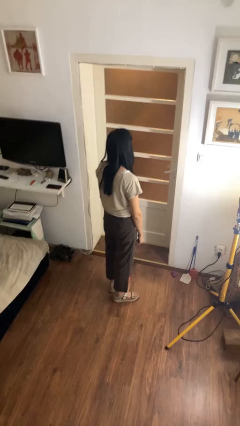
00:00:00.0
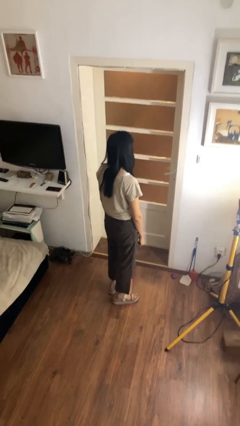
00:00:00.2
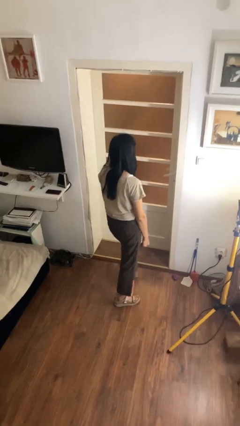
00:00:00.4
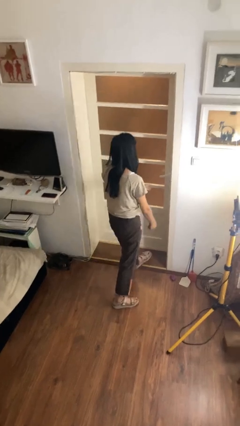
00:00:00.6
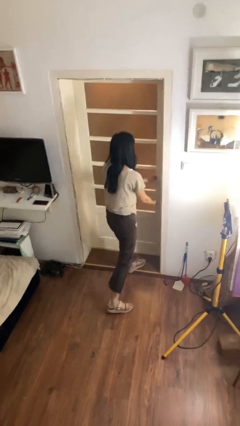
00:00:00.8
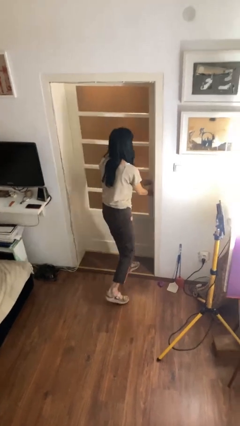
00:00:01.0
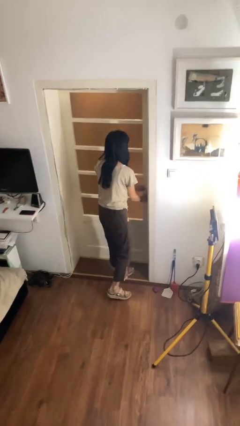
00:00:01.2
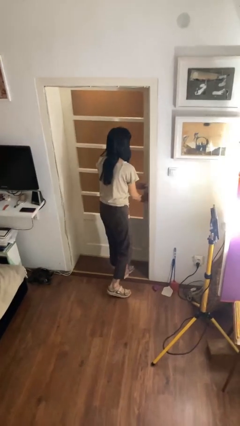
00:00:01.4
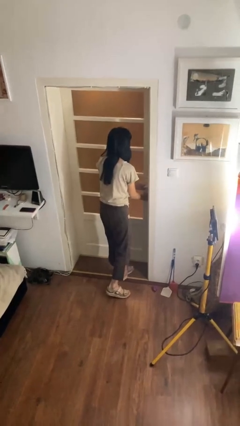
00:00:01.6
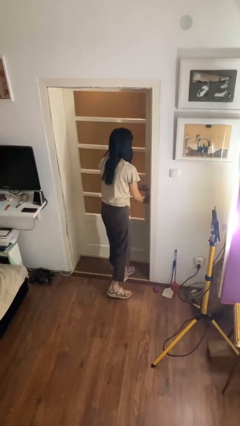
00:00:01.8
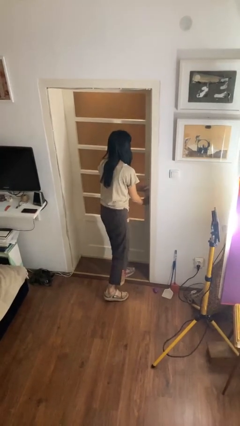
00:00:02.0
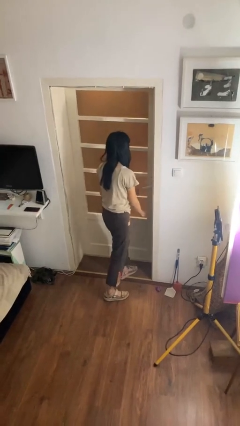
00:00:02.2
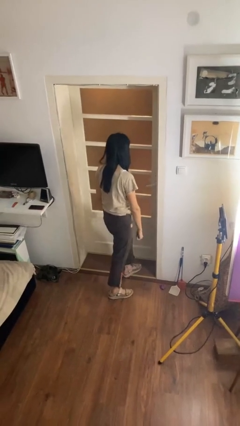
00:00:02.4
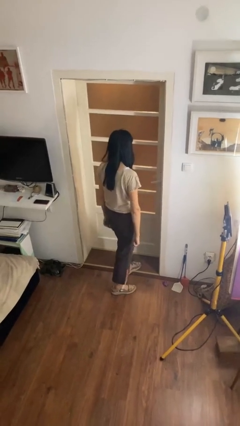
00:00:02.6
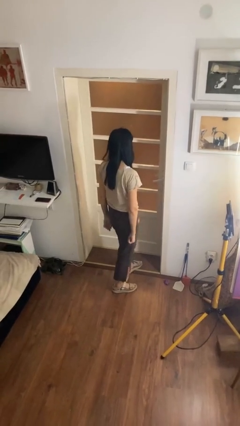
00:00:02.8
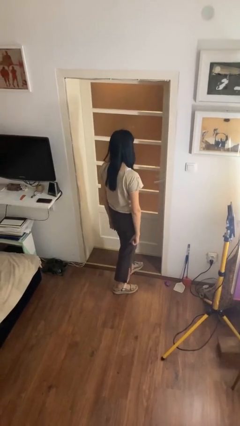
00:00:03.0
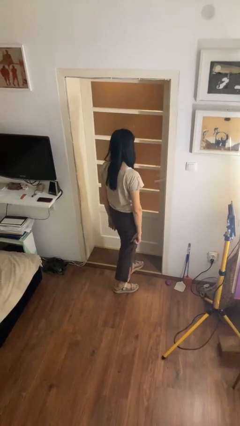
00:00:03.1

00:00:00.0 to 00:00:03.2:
person unlocks door with keys

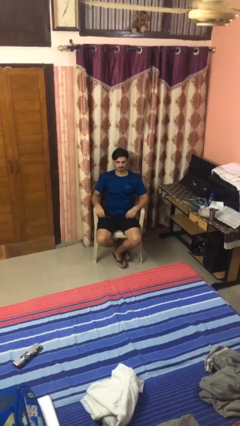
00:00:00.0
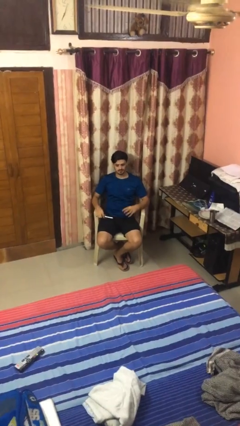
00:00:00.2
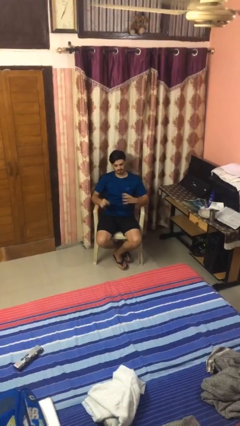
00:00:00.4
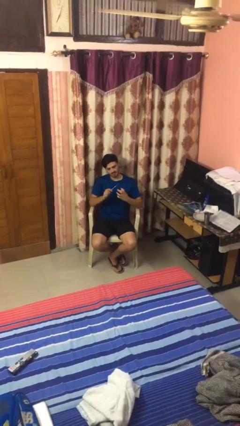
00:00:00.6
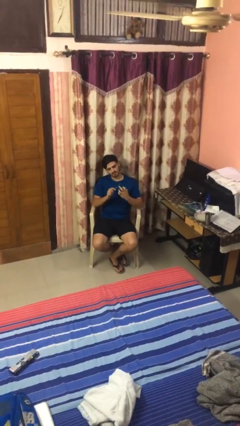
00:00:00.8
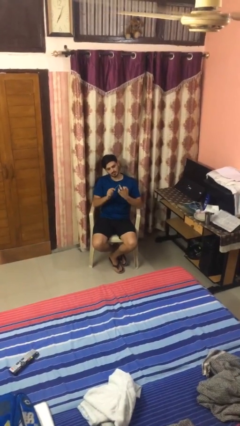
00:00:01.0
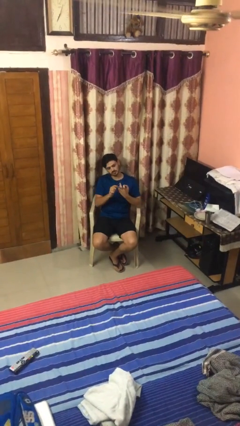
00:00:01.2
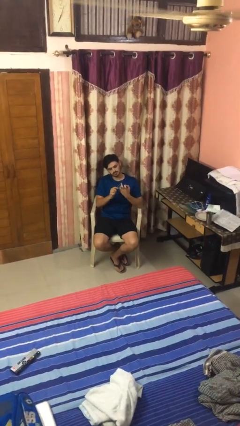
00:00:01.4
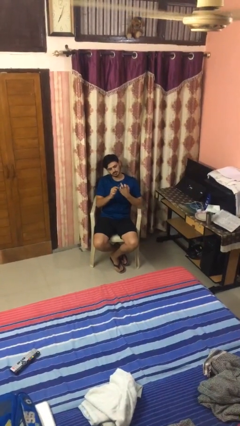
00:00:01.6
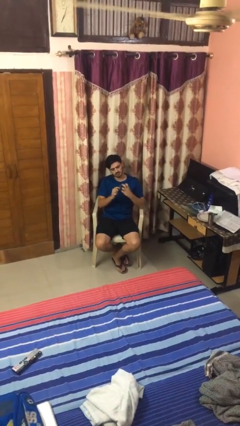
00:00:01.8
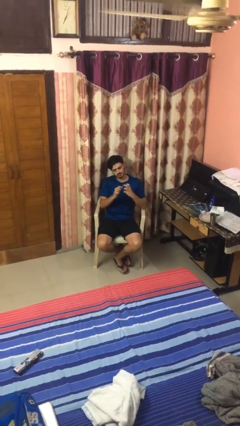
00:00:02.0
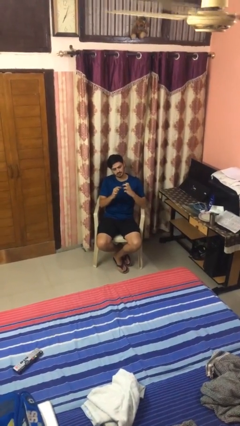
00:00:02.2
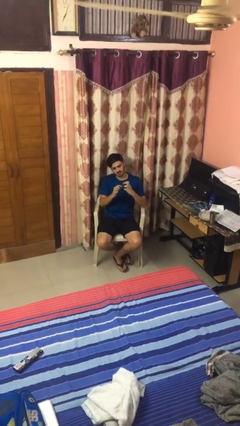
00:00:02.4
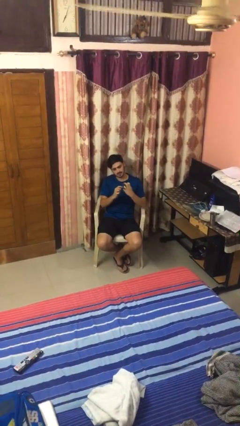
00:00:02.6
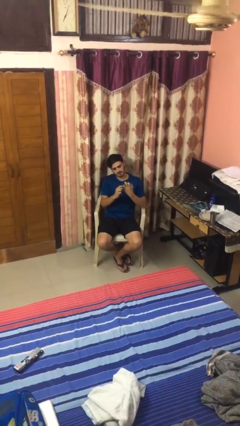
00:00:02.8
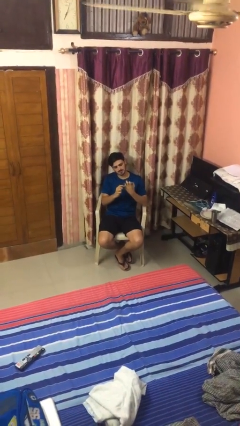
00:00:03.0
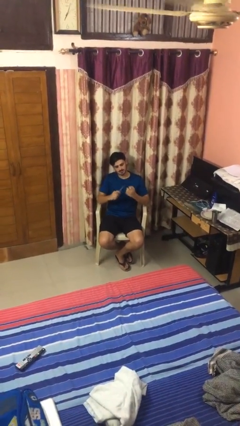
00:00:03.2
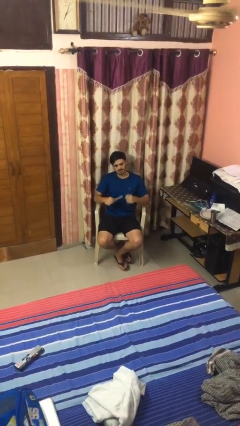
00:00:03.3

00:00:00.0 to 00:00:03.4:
person files fingernails

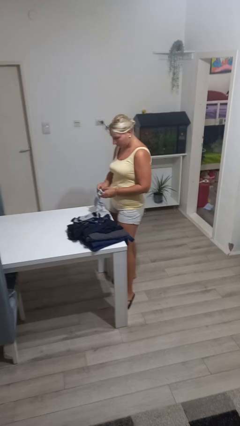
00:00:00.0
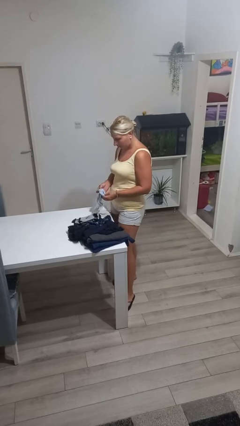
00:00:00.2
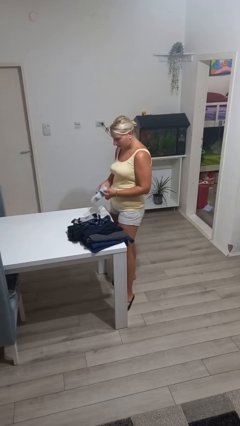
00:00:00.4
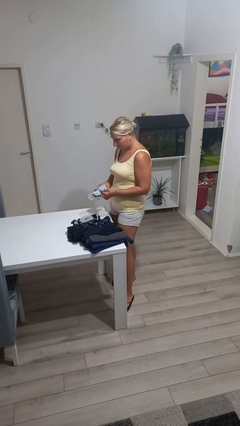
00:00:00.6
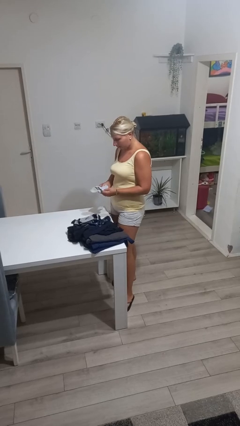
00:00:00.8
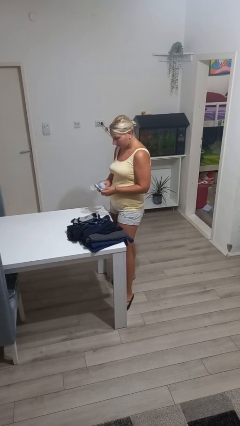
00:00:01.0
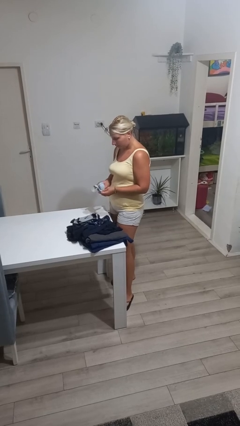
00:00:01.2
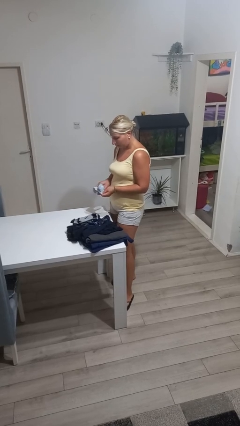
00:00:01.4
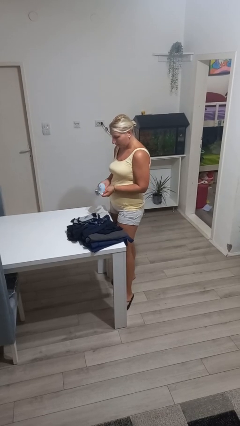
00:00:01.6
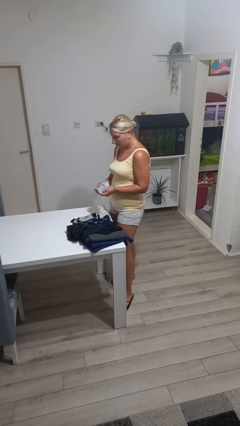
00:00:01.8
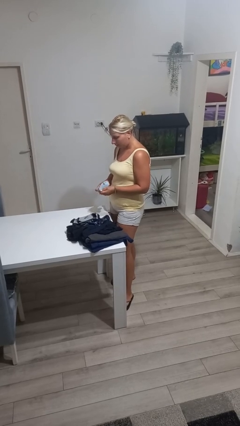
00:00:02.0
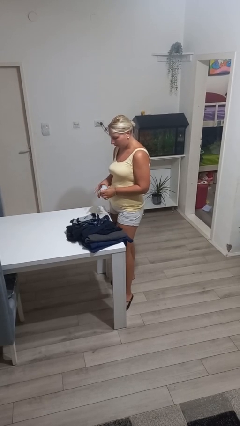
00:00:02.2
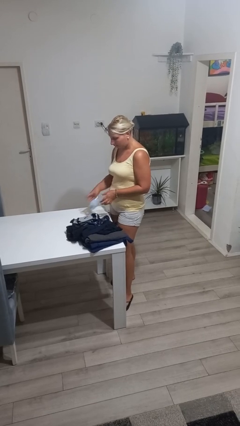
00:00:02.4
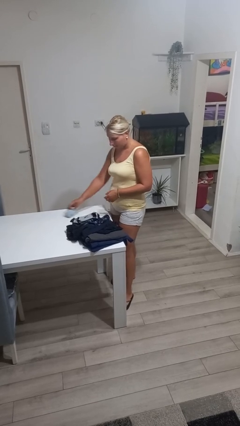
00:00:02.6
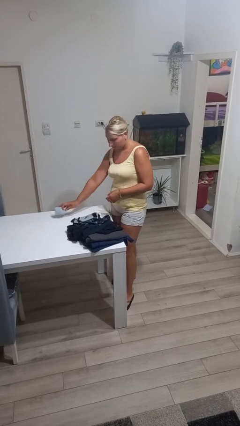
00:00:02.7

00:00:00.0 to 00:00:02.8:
person folds socks

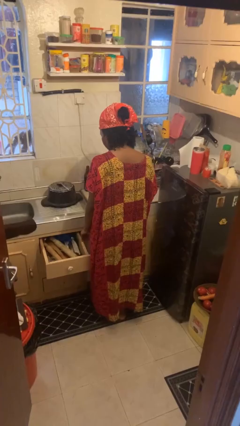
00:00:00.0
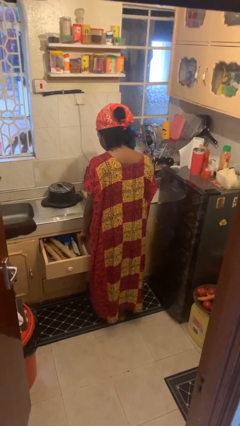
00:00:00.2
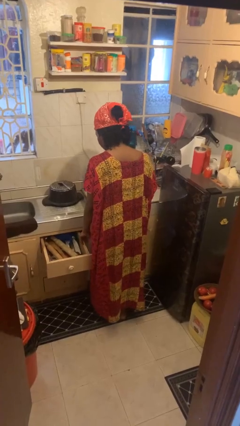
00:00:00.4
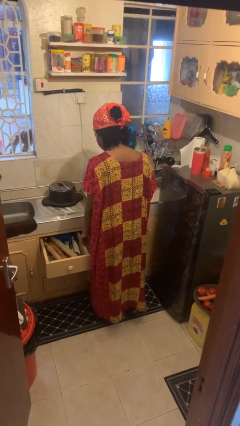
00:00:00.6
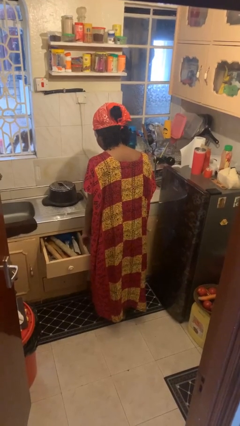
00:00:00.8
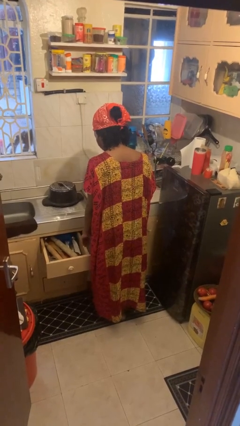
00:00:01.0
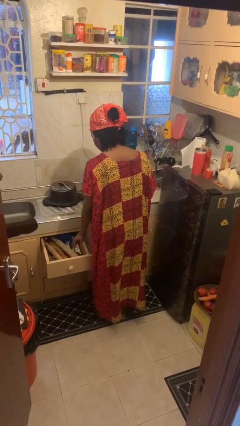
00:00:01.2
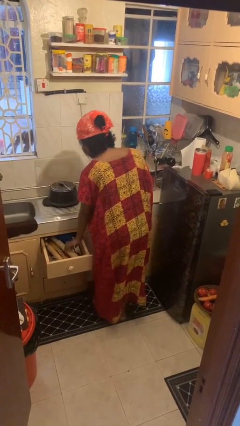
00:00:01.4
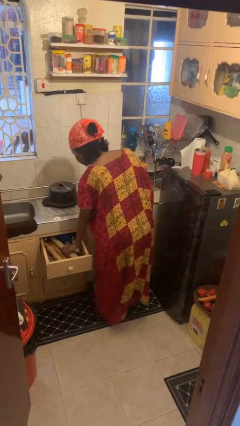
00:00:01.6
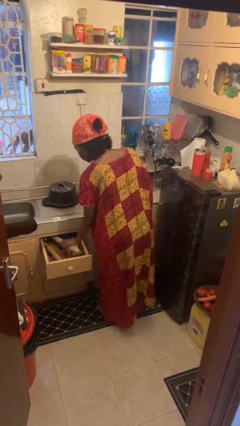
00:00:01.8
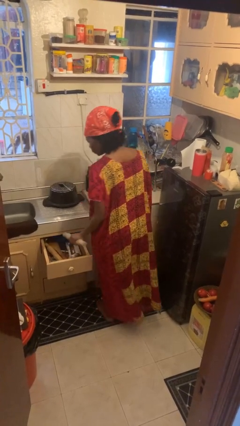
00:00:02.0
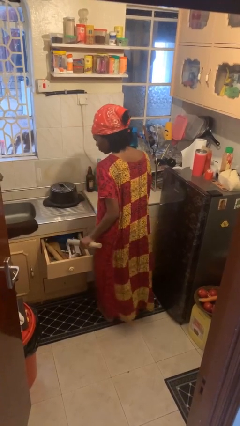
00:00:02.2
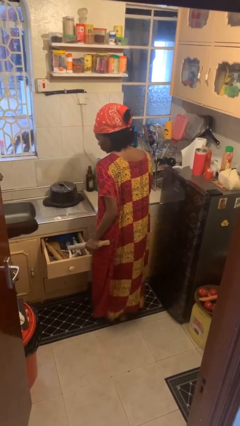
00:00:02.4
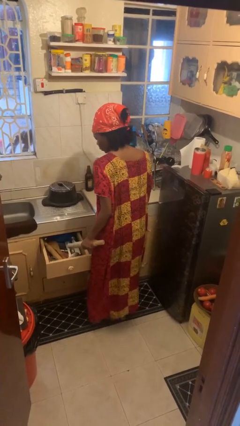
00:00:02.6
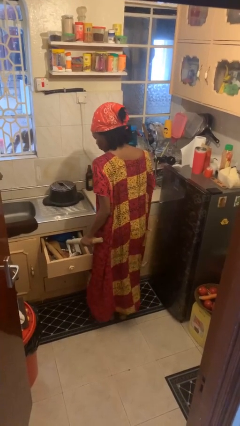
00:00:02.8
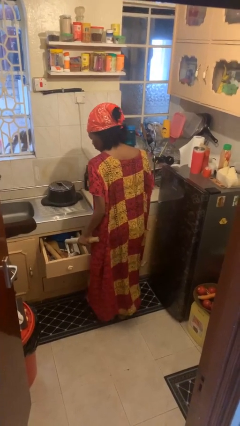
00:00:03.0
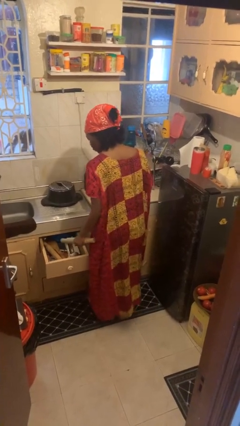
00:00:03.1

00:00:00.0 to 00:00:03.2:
person takes object from kitchen drawer

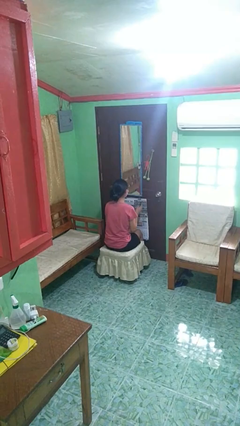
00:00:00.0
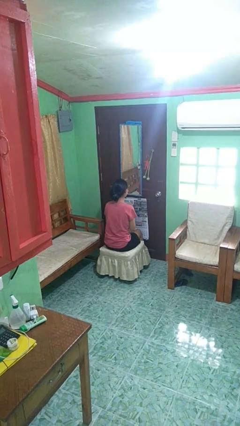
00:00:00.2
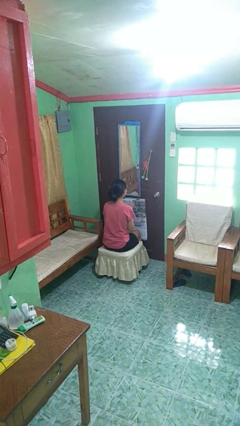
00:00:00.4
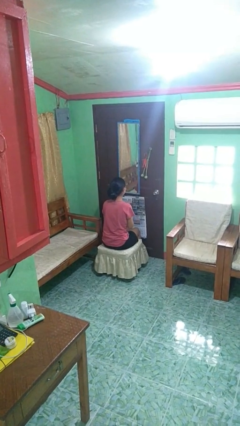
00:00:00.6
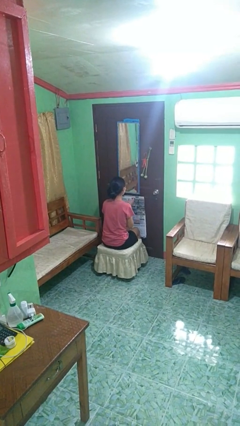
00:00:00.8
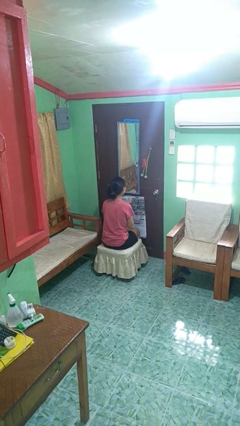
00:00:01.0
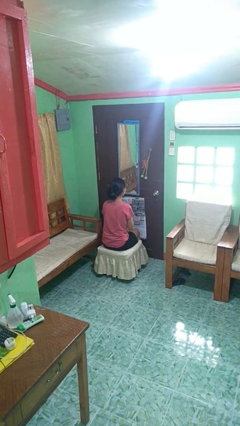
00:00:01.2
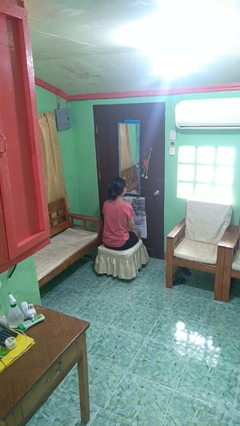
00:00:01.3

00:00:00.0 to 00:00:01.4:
person claps hands

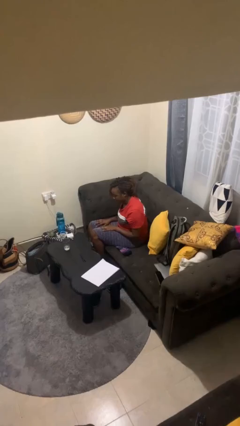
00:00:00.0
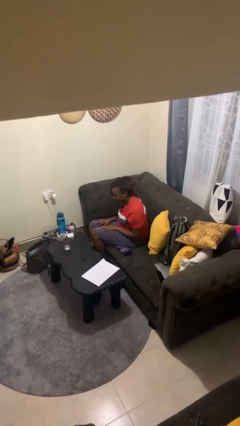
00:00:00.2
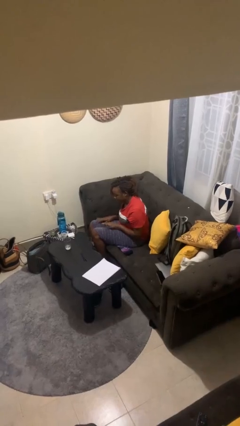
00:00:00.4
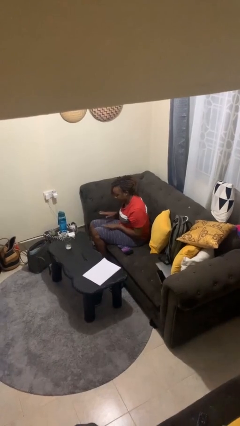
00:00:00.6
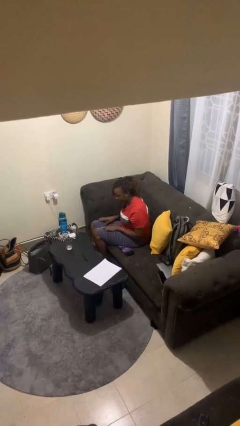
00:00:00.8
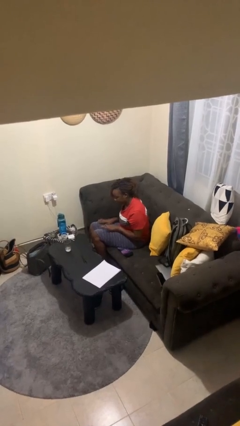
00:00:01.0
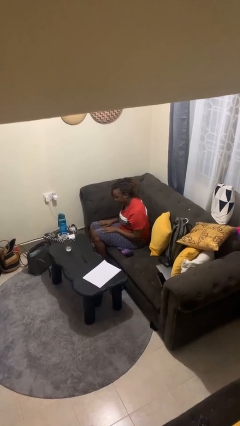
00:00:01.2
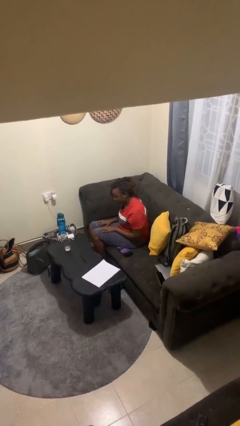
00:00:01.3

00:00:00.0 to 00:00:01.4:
person slaps hands on thighs

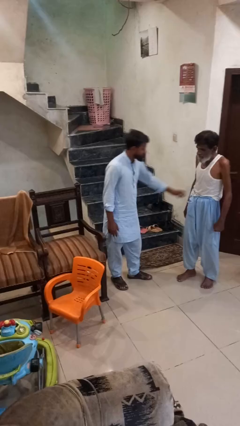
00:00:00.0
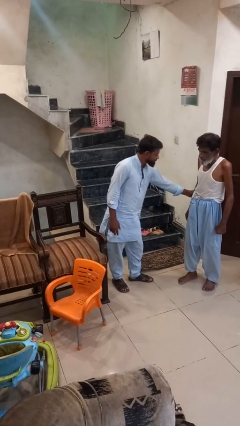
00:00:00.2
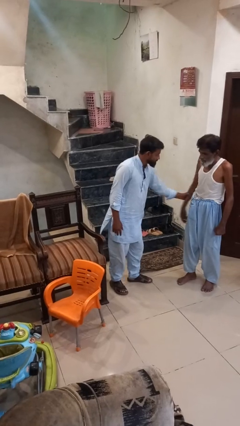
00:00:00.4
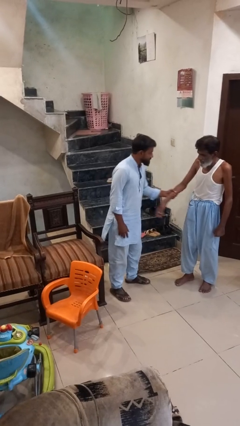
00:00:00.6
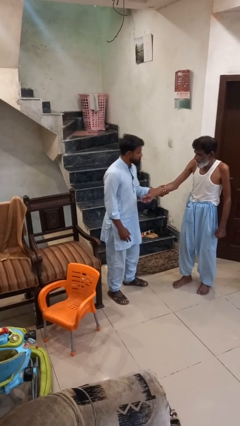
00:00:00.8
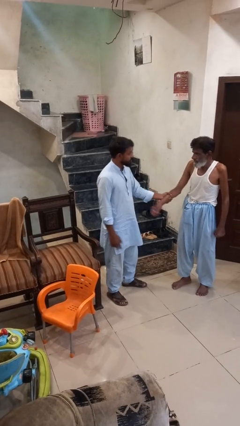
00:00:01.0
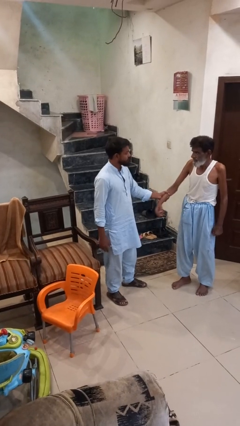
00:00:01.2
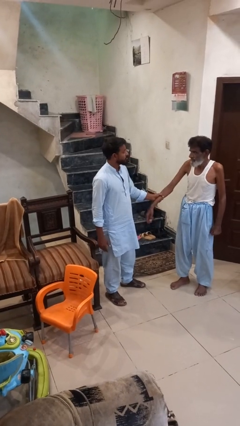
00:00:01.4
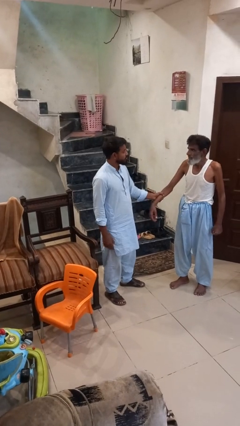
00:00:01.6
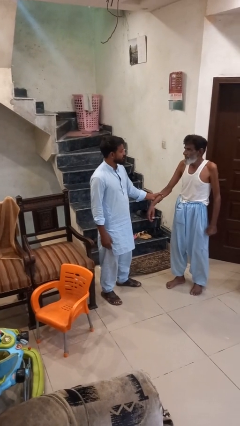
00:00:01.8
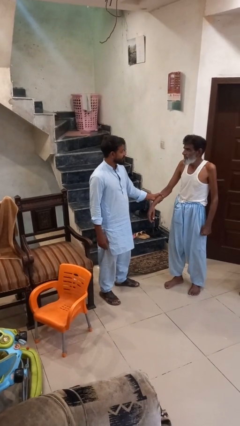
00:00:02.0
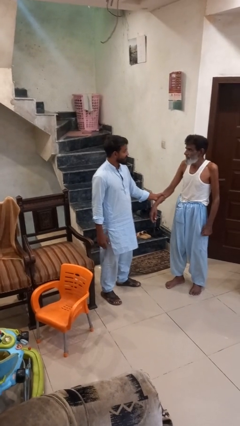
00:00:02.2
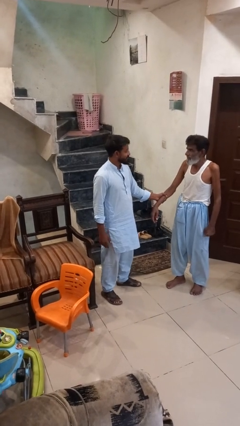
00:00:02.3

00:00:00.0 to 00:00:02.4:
person grabs person by forearm
